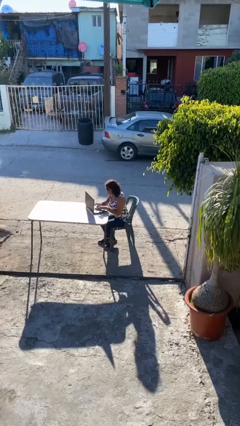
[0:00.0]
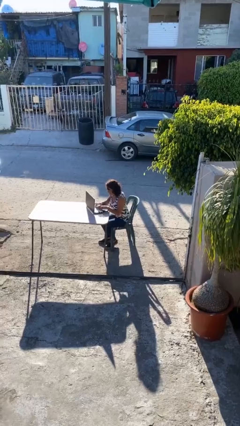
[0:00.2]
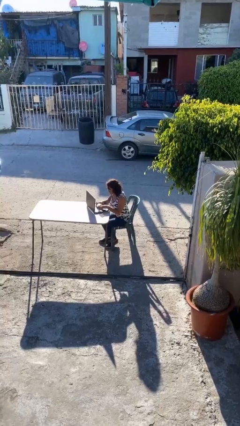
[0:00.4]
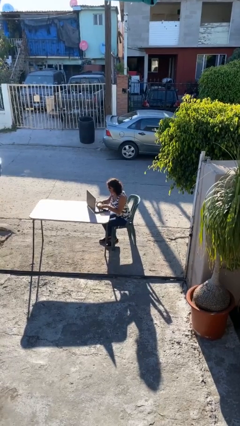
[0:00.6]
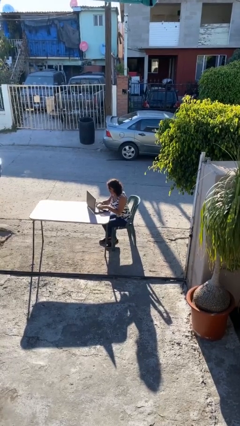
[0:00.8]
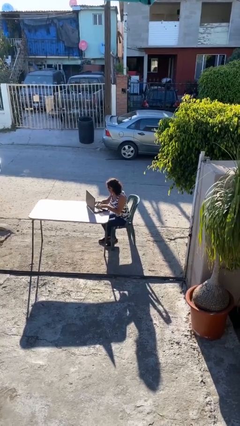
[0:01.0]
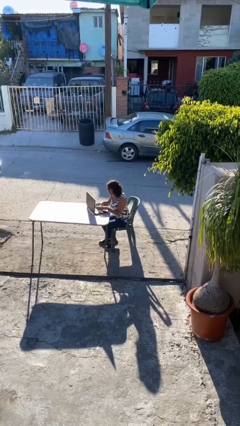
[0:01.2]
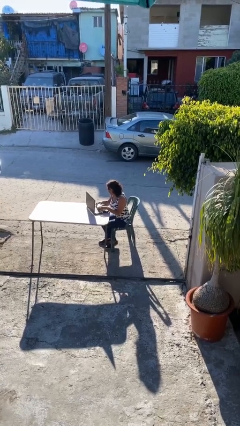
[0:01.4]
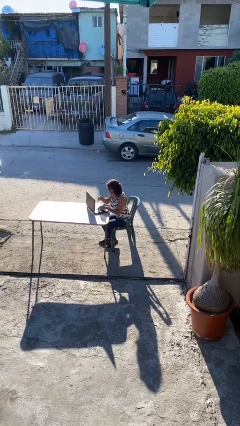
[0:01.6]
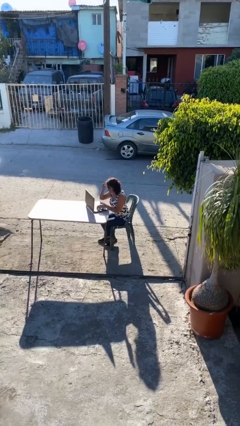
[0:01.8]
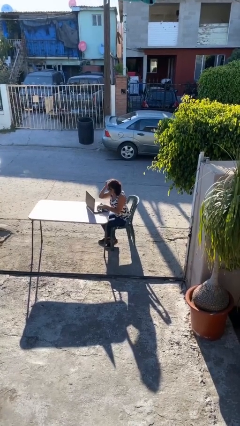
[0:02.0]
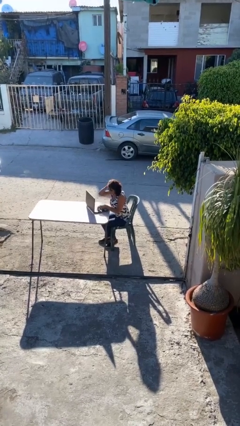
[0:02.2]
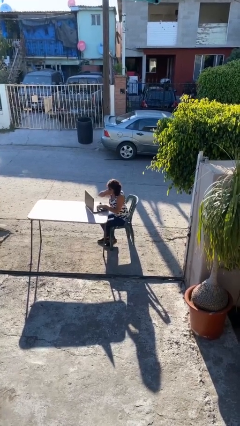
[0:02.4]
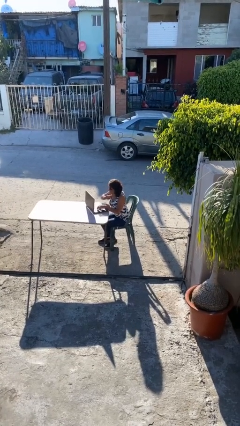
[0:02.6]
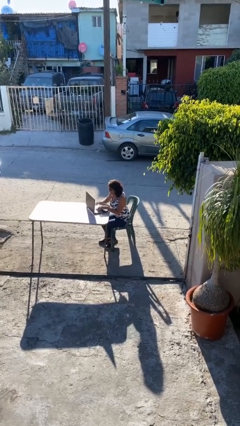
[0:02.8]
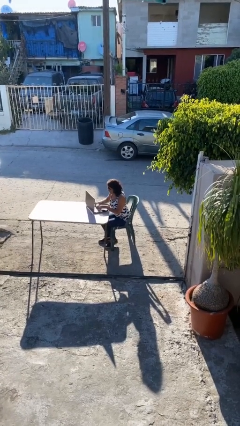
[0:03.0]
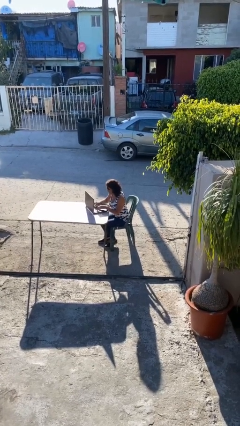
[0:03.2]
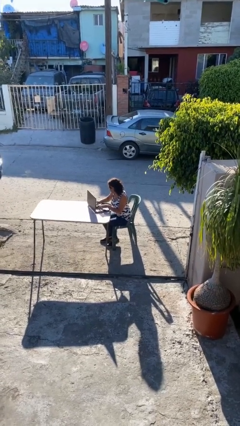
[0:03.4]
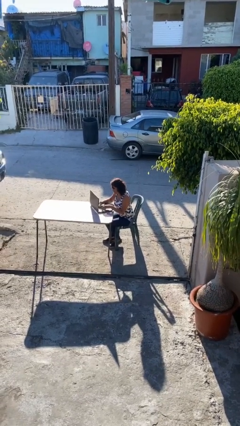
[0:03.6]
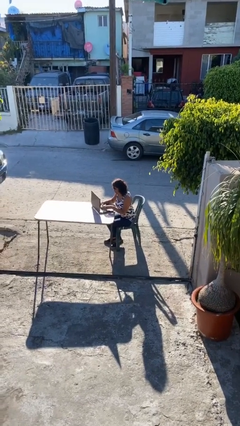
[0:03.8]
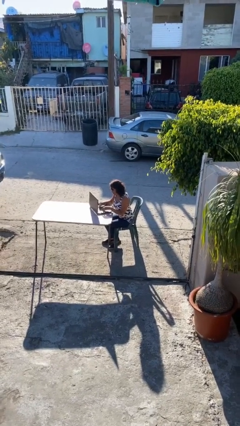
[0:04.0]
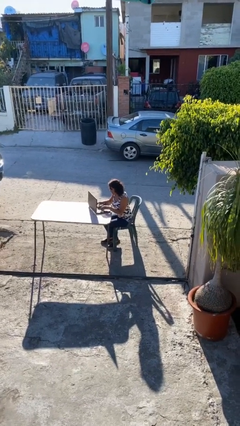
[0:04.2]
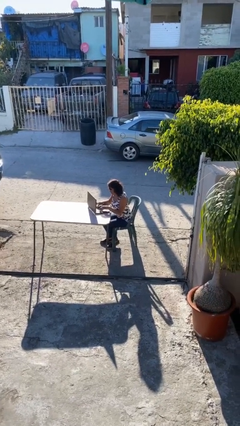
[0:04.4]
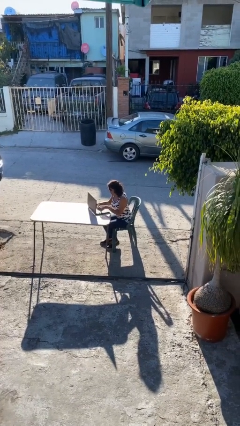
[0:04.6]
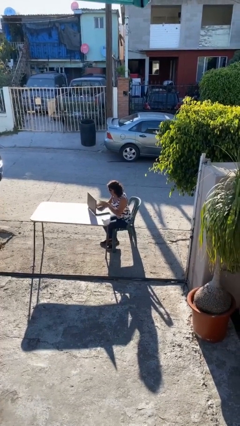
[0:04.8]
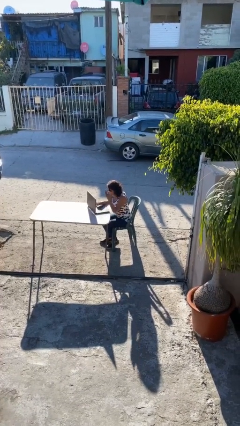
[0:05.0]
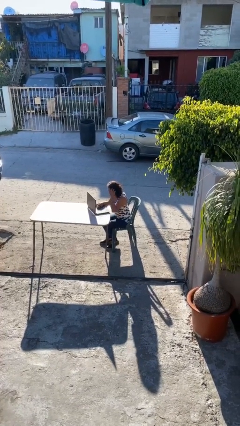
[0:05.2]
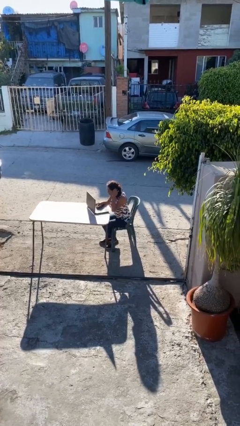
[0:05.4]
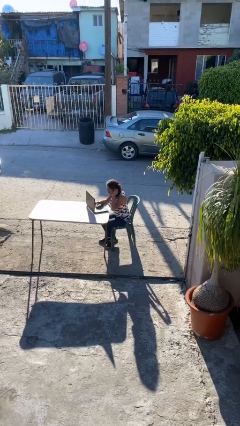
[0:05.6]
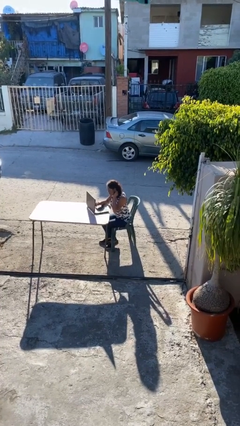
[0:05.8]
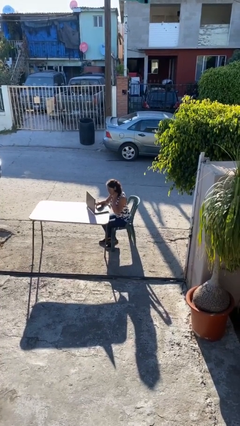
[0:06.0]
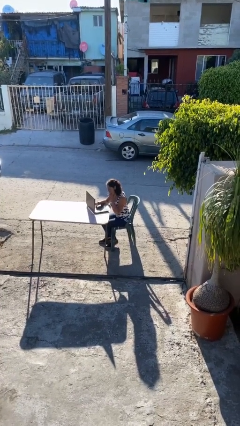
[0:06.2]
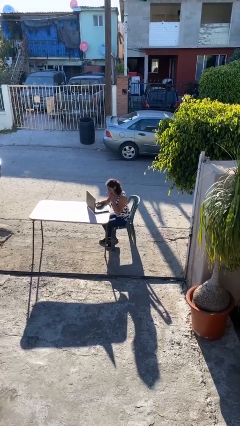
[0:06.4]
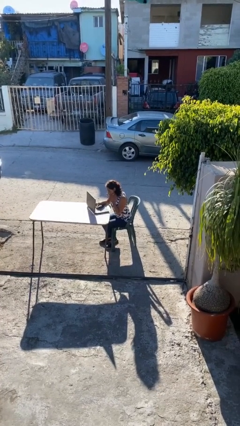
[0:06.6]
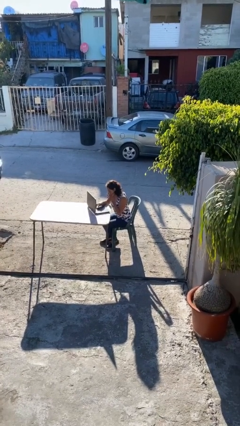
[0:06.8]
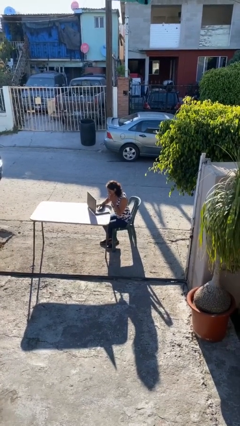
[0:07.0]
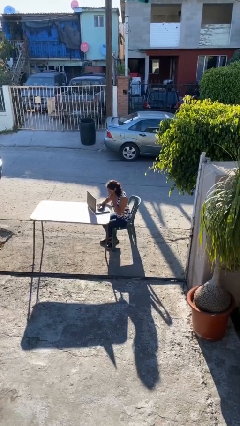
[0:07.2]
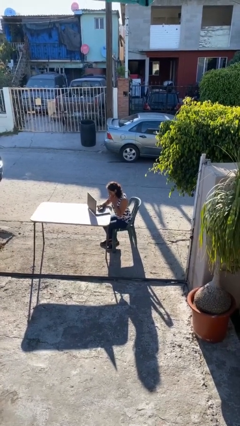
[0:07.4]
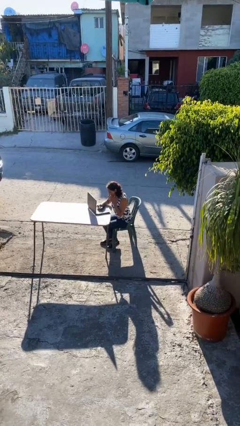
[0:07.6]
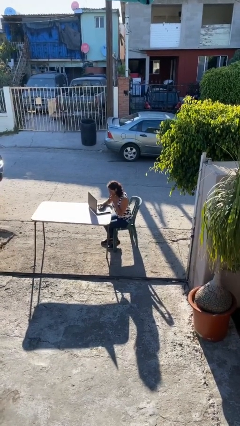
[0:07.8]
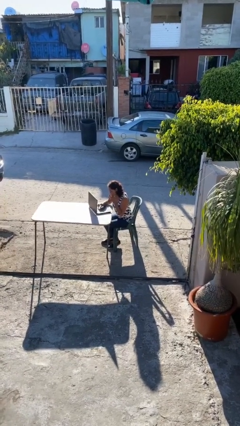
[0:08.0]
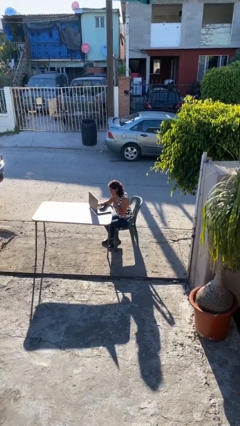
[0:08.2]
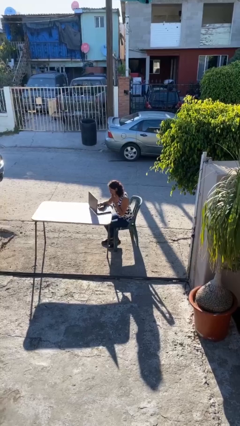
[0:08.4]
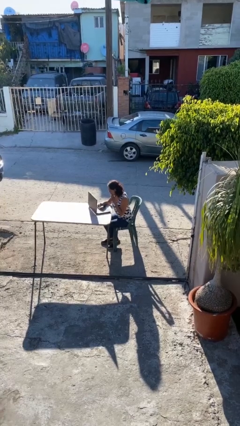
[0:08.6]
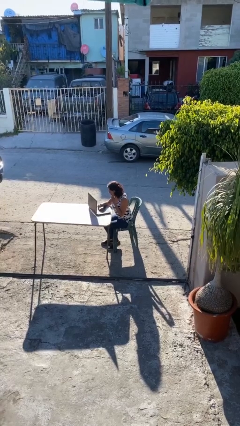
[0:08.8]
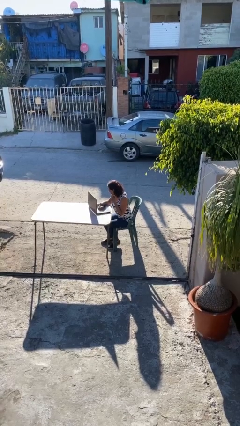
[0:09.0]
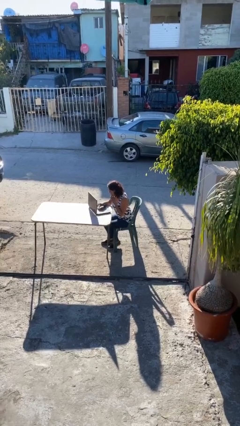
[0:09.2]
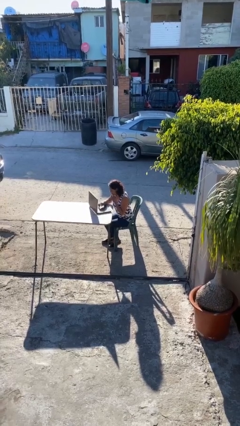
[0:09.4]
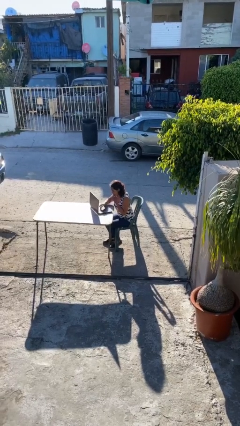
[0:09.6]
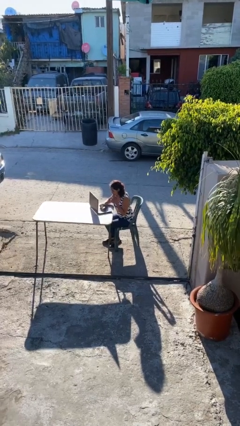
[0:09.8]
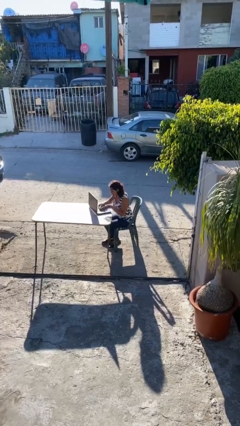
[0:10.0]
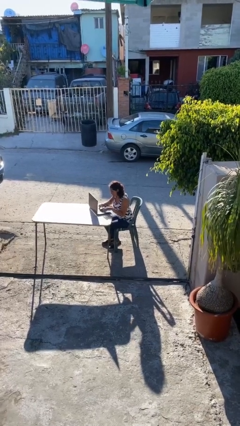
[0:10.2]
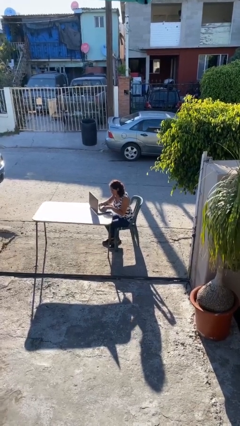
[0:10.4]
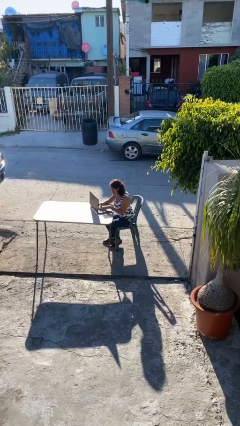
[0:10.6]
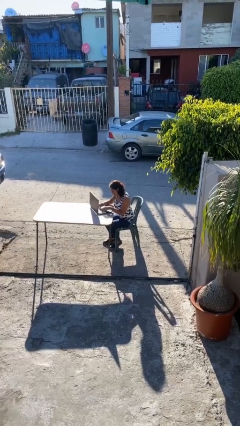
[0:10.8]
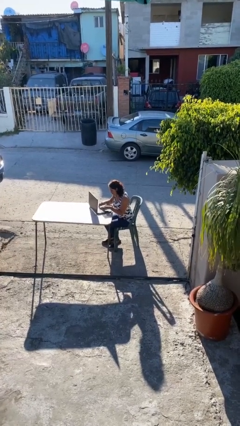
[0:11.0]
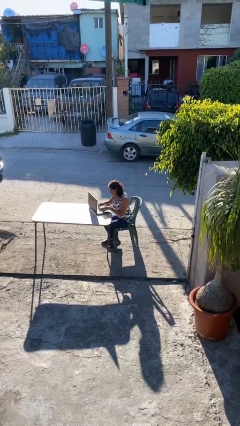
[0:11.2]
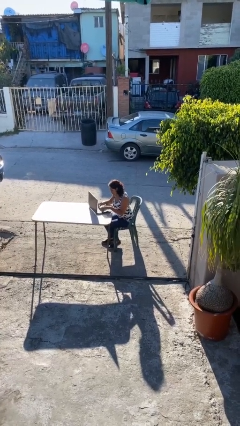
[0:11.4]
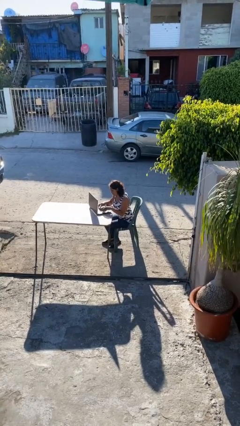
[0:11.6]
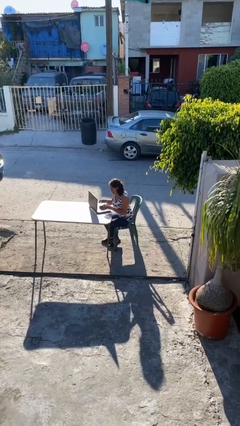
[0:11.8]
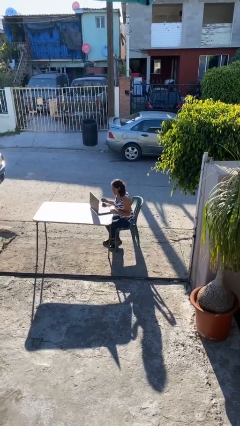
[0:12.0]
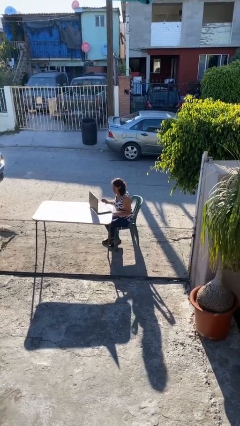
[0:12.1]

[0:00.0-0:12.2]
person interacts with laptop

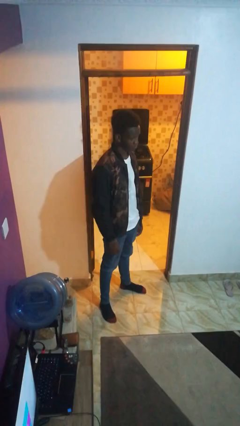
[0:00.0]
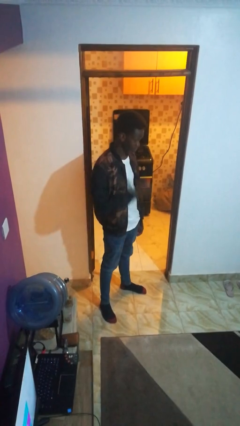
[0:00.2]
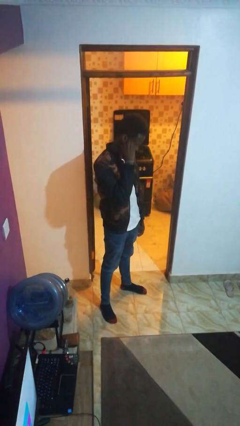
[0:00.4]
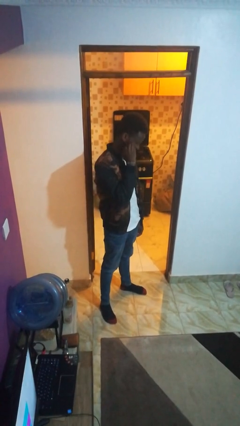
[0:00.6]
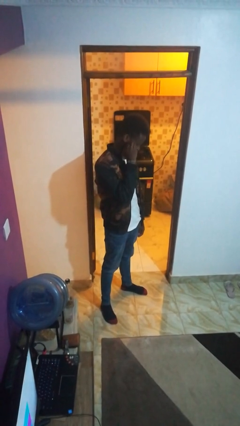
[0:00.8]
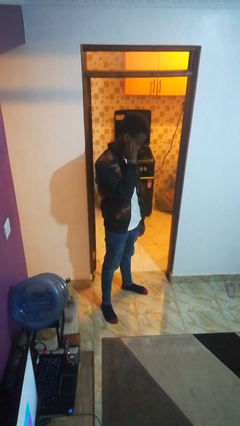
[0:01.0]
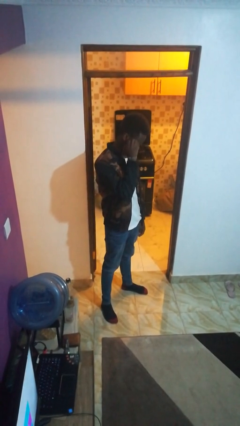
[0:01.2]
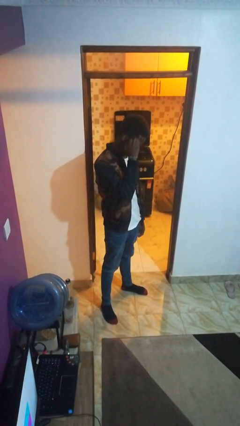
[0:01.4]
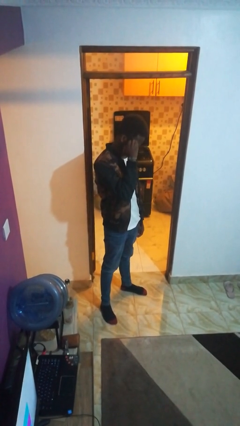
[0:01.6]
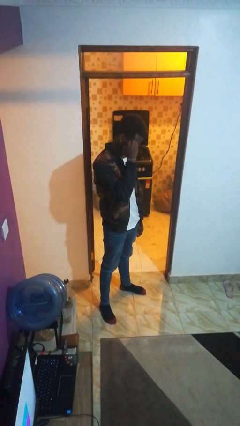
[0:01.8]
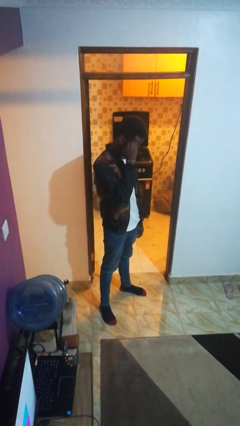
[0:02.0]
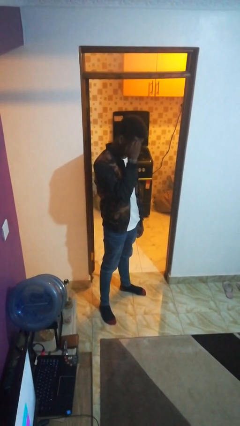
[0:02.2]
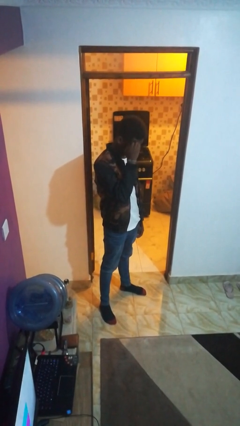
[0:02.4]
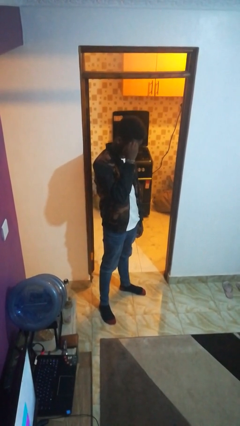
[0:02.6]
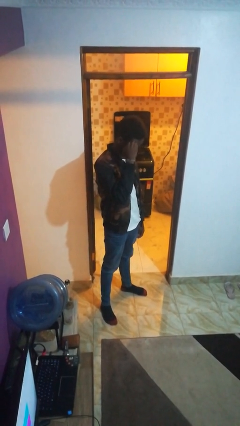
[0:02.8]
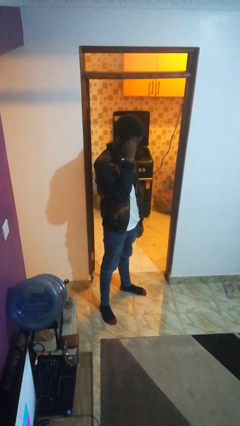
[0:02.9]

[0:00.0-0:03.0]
person scratches face

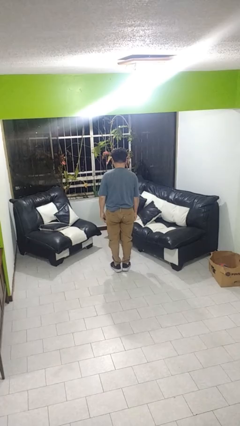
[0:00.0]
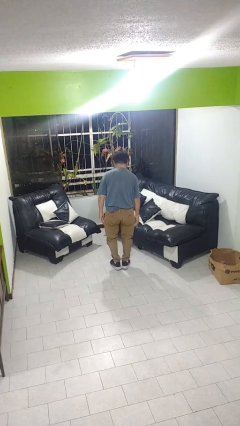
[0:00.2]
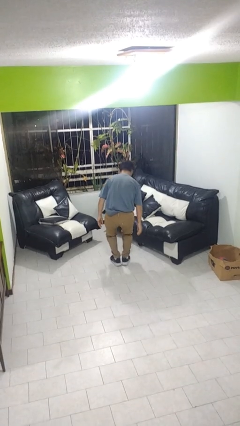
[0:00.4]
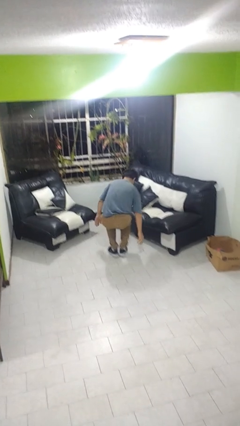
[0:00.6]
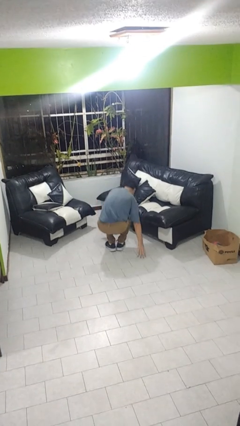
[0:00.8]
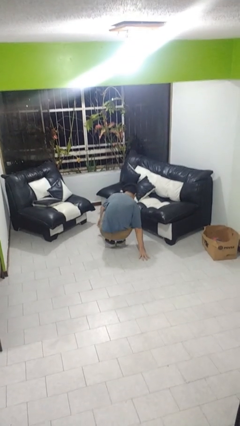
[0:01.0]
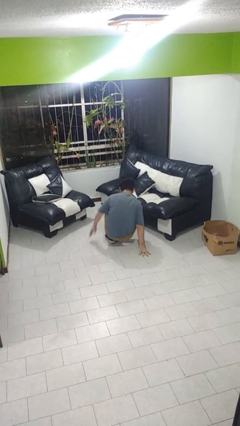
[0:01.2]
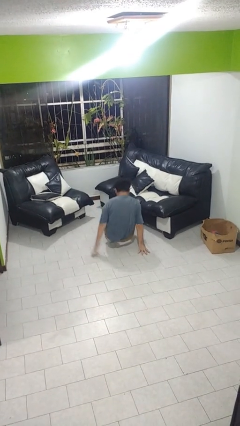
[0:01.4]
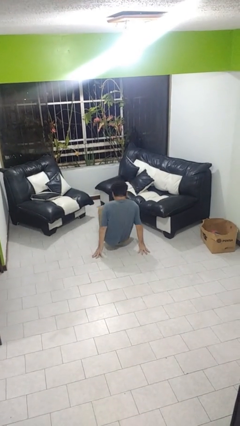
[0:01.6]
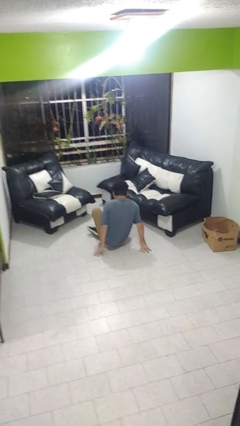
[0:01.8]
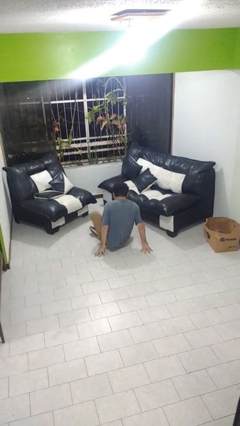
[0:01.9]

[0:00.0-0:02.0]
person sits crisscross
